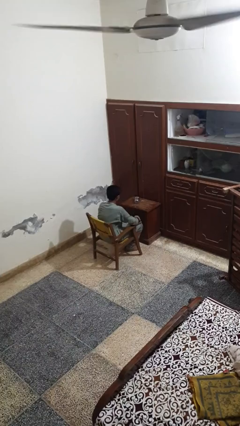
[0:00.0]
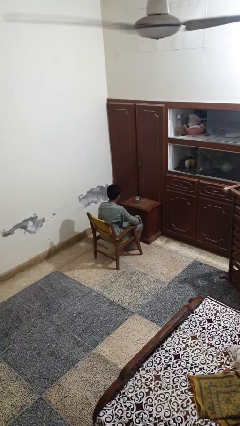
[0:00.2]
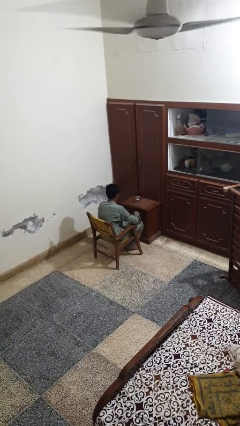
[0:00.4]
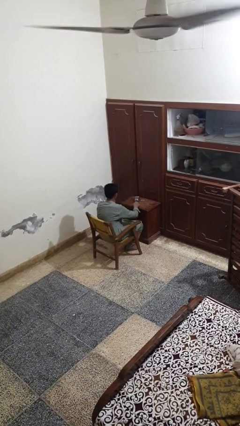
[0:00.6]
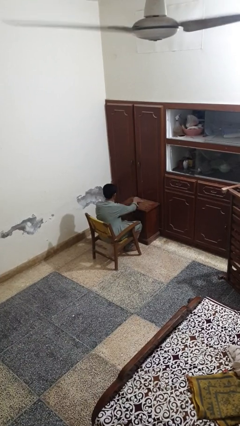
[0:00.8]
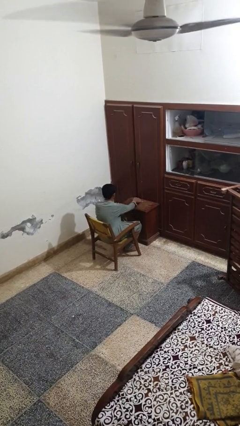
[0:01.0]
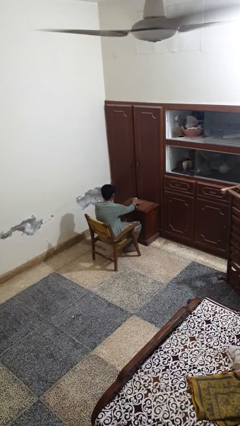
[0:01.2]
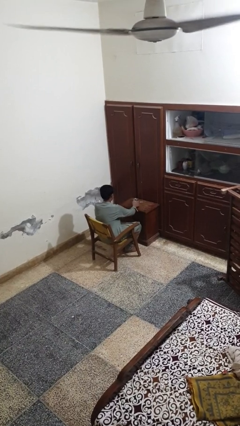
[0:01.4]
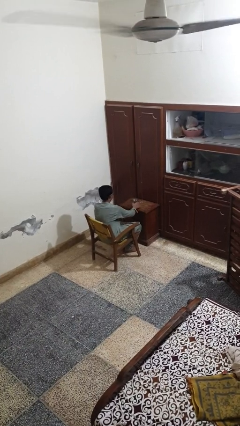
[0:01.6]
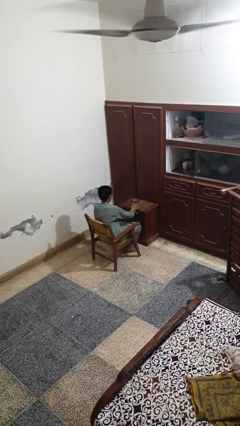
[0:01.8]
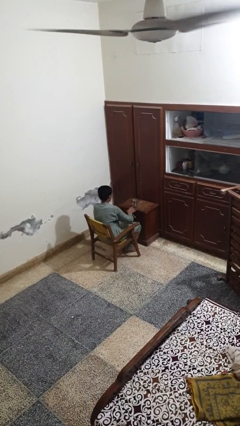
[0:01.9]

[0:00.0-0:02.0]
person sets upright glass

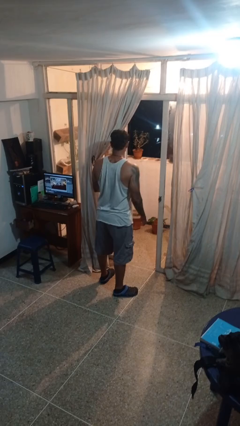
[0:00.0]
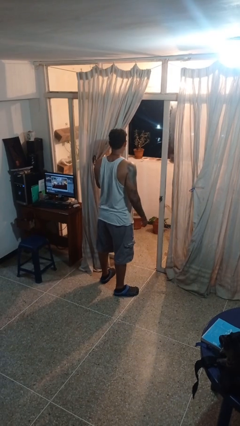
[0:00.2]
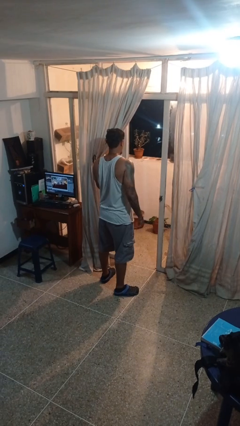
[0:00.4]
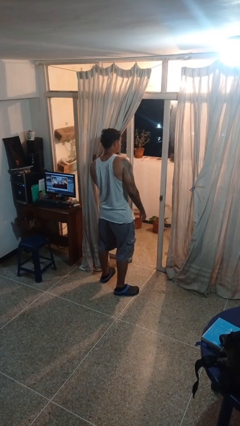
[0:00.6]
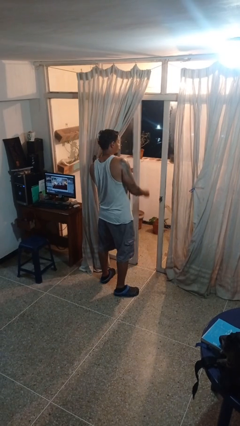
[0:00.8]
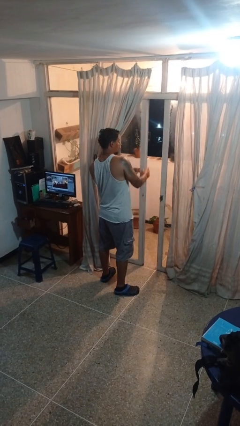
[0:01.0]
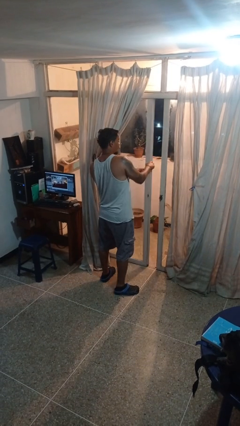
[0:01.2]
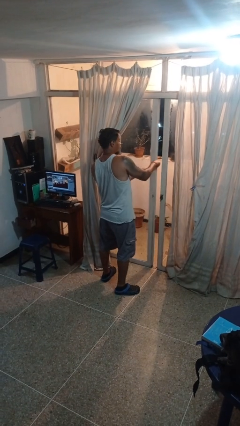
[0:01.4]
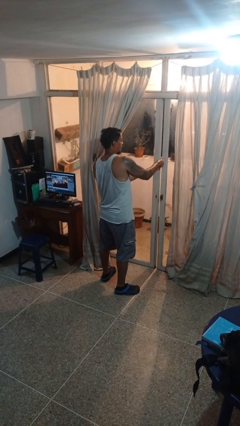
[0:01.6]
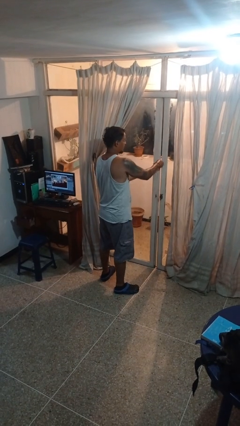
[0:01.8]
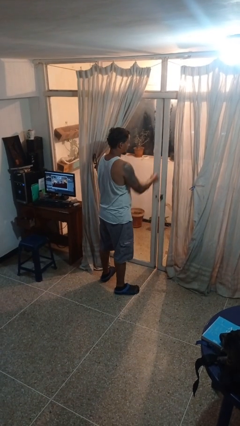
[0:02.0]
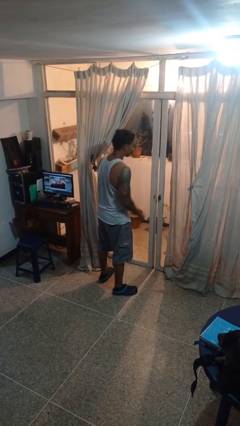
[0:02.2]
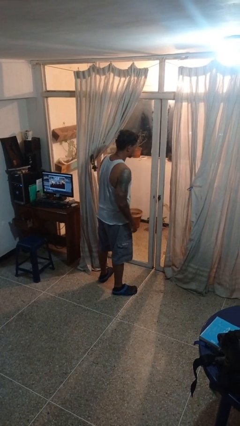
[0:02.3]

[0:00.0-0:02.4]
person closes sliding door

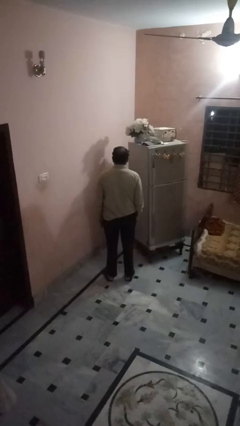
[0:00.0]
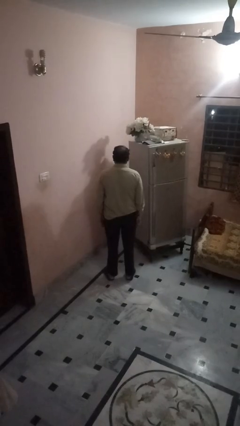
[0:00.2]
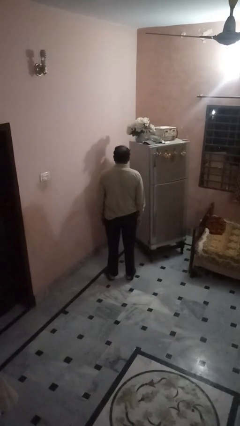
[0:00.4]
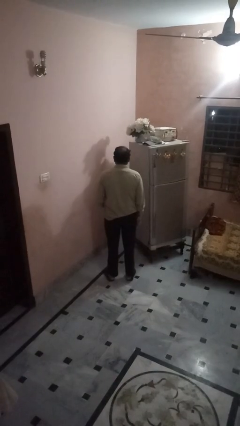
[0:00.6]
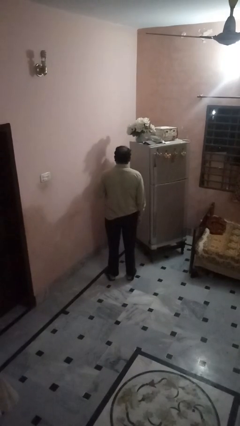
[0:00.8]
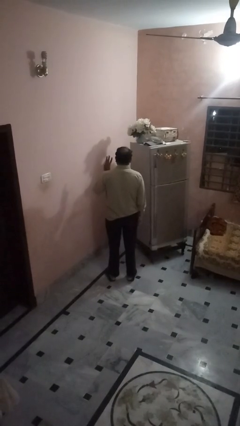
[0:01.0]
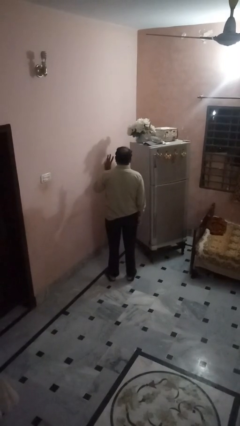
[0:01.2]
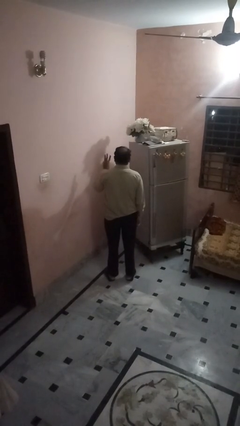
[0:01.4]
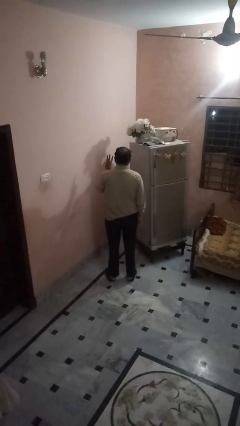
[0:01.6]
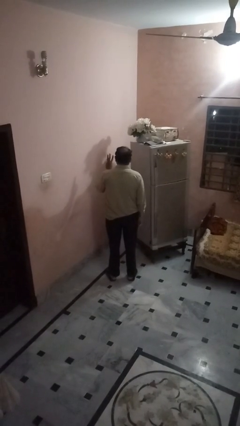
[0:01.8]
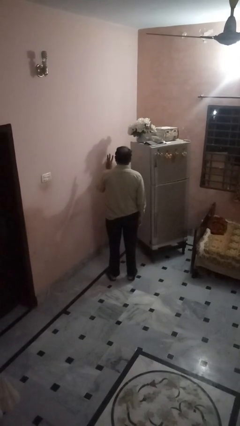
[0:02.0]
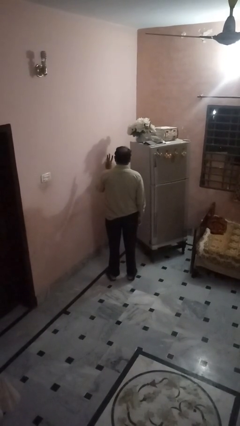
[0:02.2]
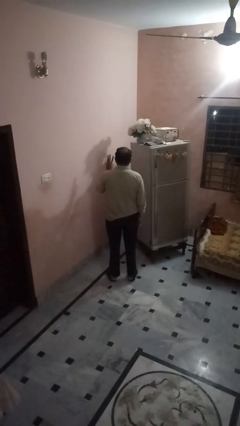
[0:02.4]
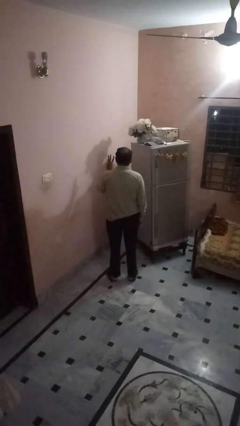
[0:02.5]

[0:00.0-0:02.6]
person gestures number three

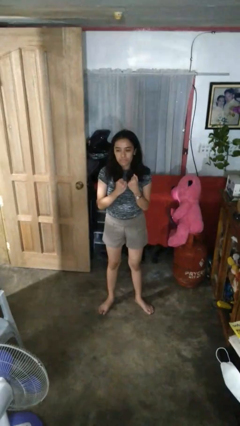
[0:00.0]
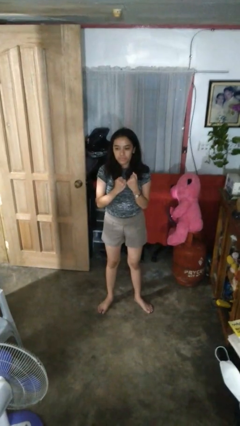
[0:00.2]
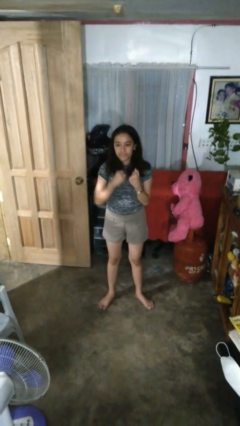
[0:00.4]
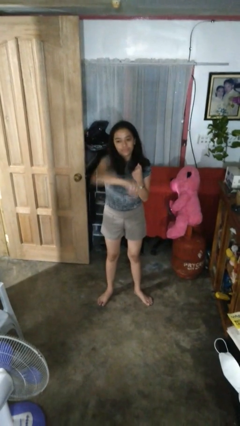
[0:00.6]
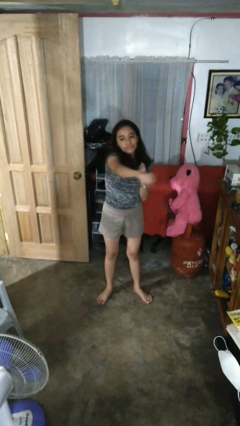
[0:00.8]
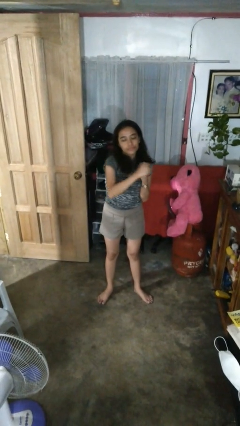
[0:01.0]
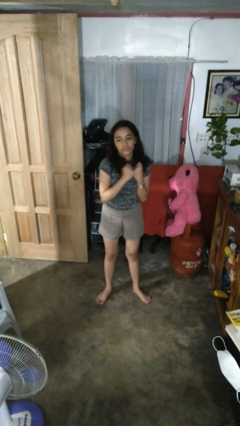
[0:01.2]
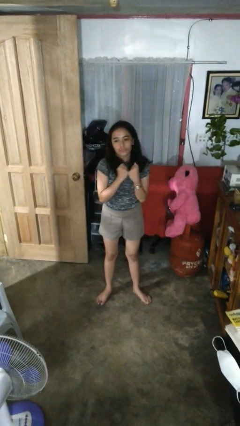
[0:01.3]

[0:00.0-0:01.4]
person punches

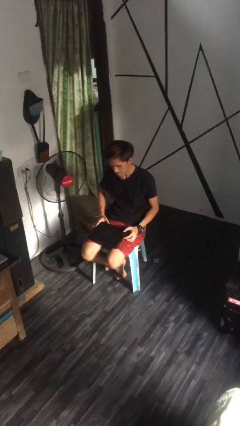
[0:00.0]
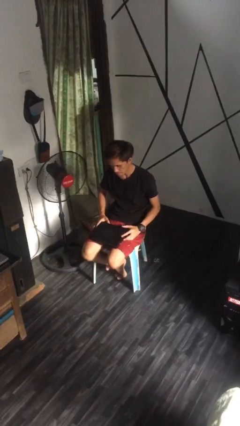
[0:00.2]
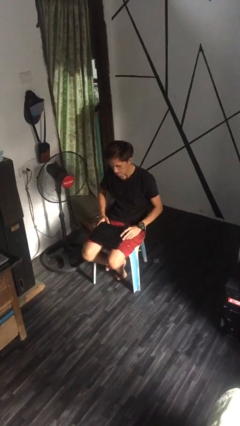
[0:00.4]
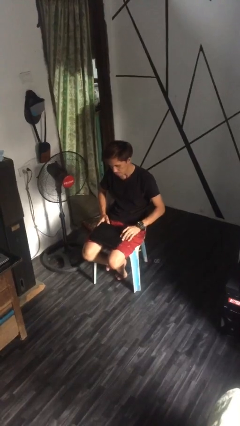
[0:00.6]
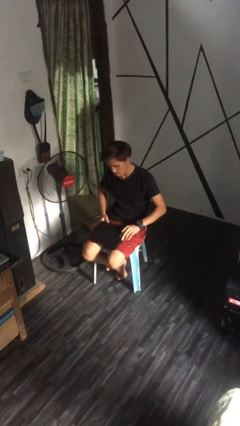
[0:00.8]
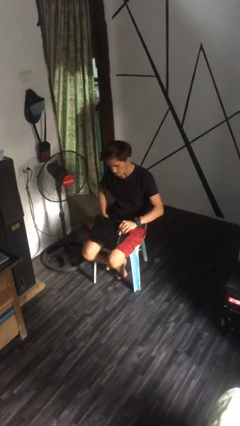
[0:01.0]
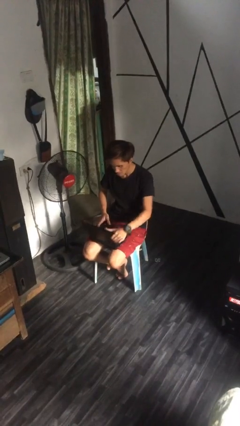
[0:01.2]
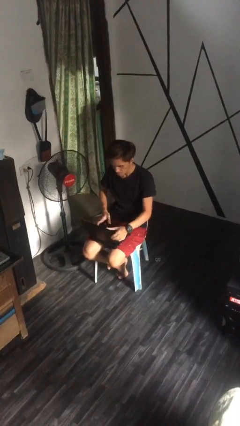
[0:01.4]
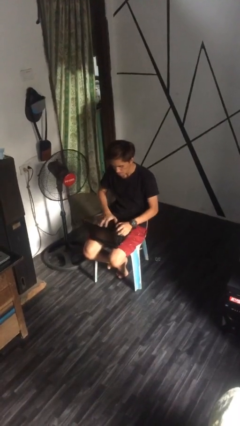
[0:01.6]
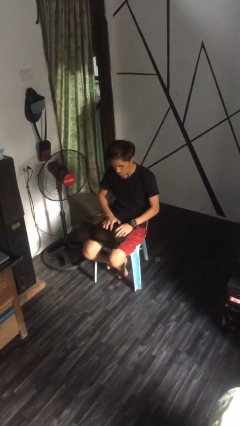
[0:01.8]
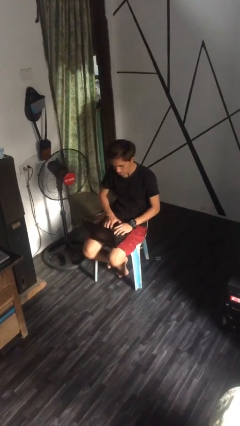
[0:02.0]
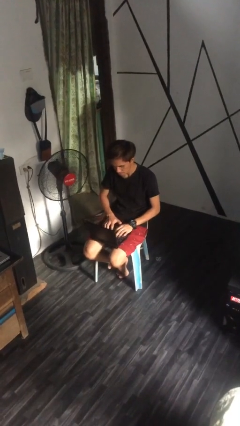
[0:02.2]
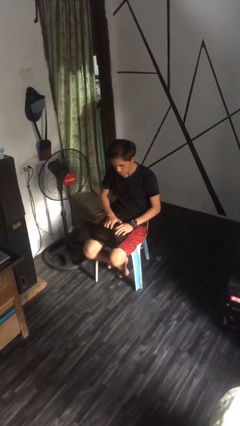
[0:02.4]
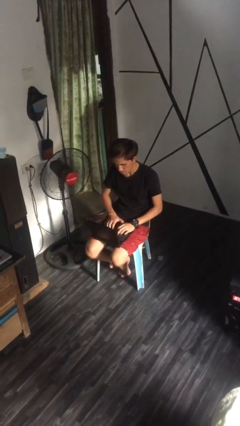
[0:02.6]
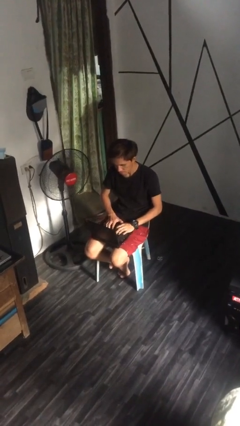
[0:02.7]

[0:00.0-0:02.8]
person interacts with laptop

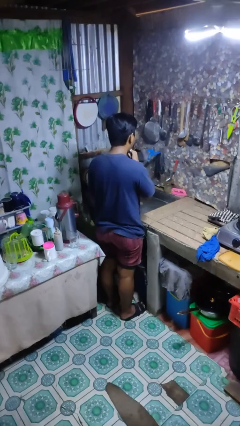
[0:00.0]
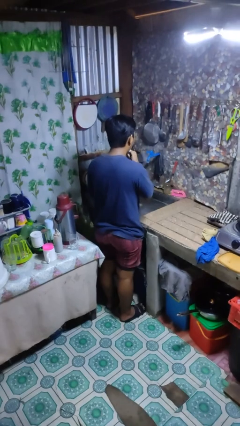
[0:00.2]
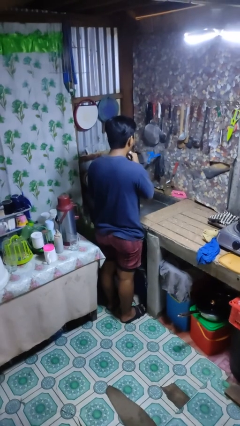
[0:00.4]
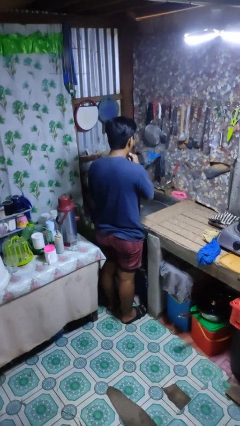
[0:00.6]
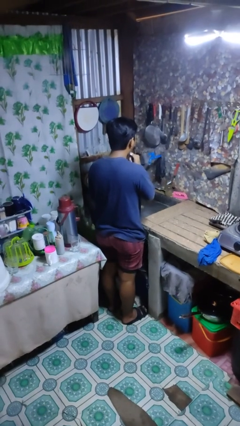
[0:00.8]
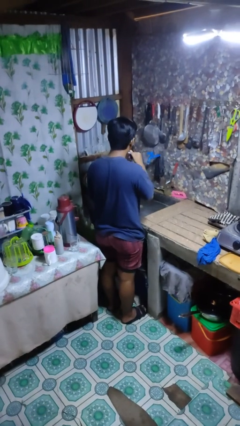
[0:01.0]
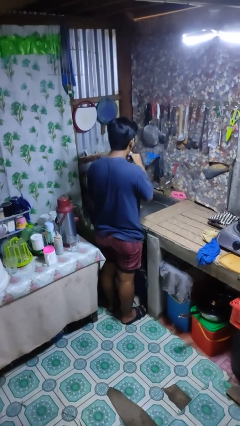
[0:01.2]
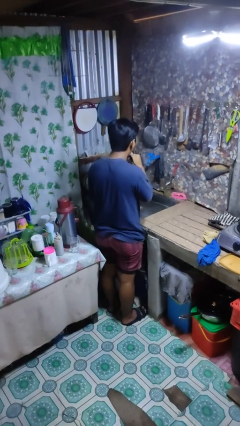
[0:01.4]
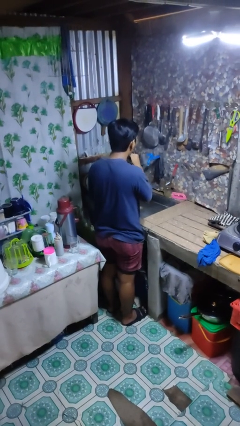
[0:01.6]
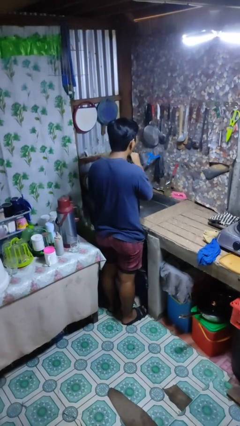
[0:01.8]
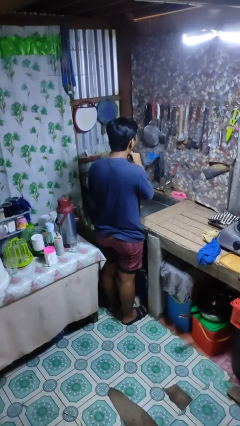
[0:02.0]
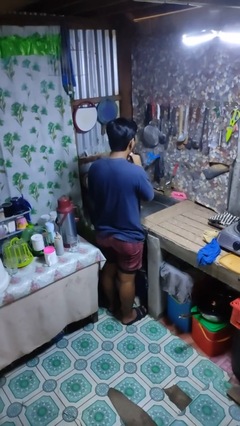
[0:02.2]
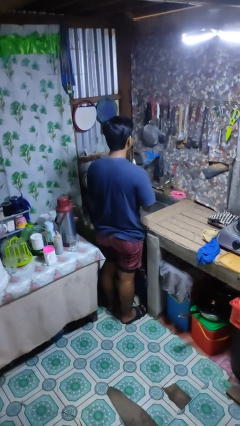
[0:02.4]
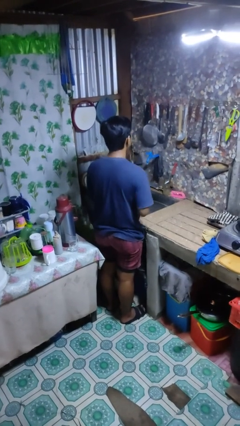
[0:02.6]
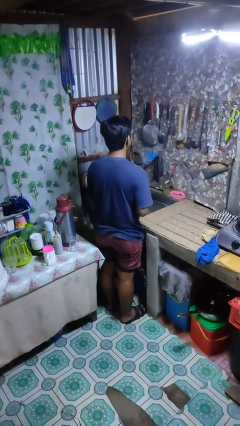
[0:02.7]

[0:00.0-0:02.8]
person brushes teeth

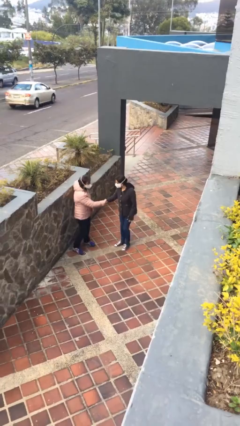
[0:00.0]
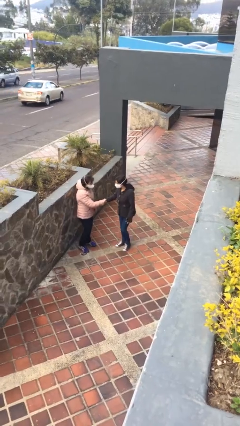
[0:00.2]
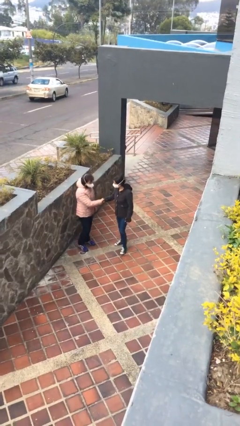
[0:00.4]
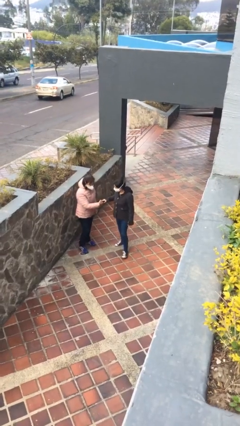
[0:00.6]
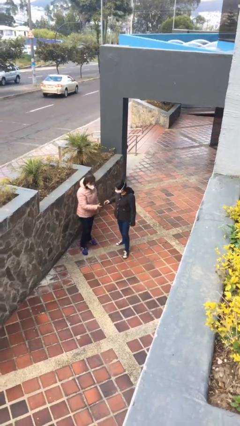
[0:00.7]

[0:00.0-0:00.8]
person shakes hand

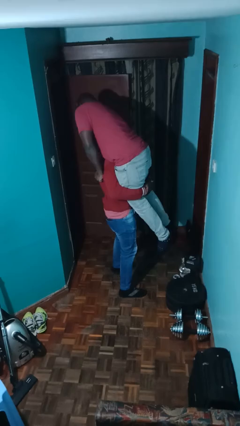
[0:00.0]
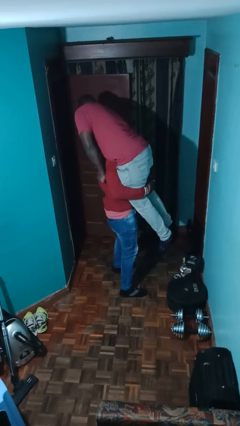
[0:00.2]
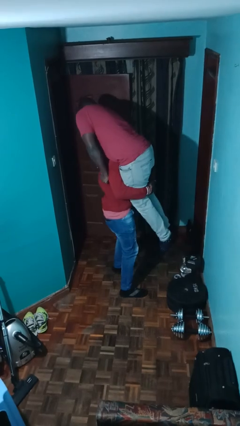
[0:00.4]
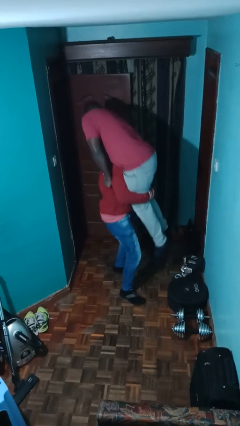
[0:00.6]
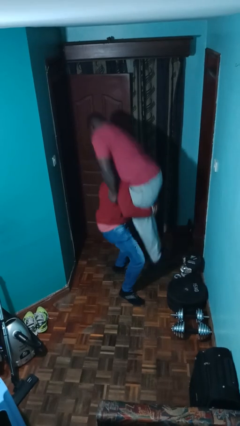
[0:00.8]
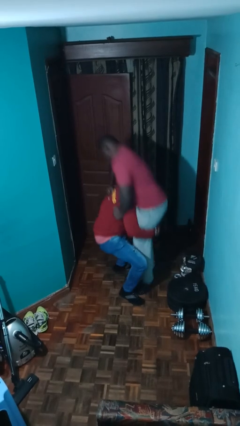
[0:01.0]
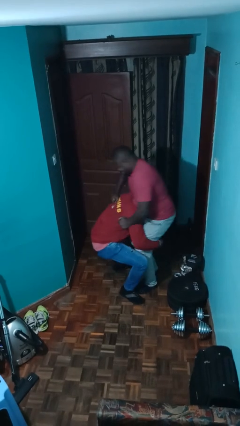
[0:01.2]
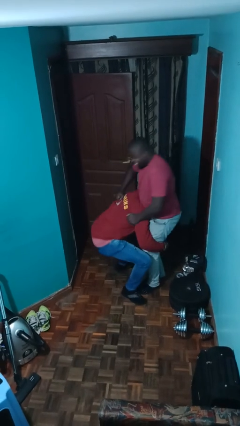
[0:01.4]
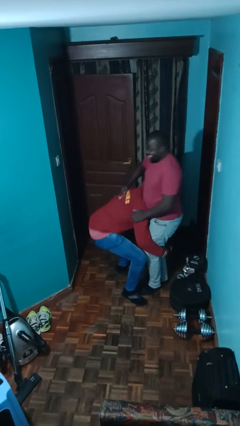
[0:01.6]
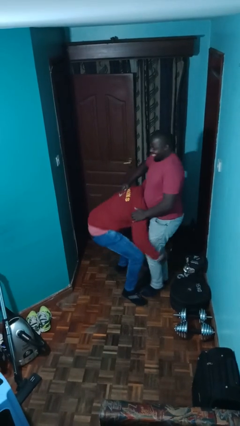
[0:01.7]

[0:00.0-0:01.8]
person puts down person
